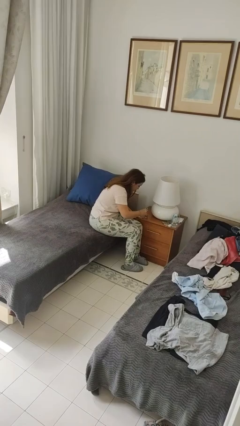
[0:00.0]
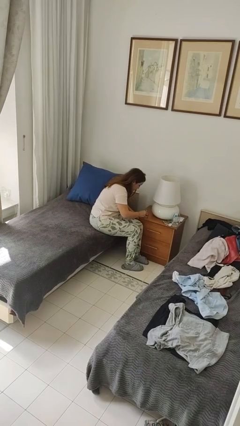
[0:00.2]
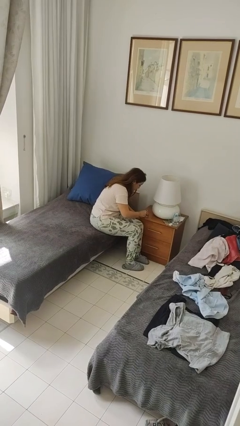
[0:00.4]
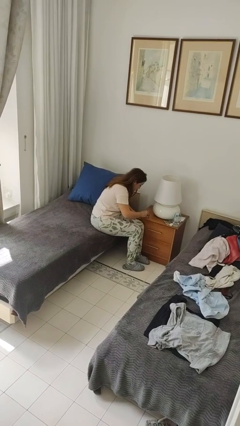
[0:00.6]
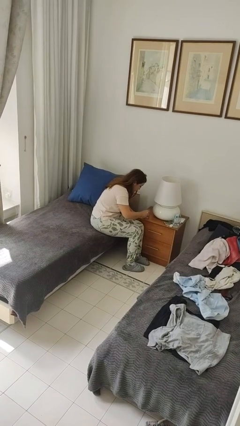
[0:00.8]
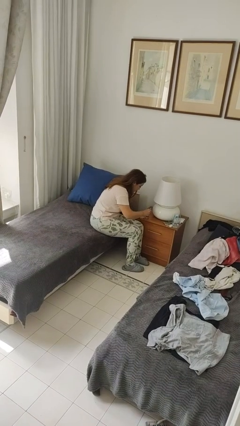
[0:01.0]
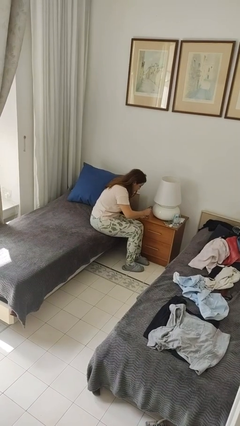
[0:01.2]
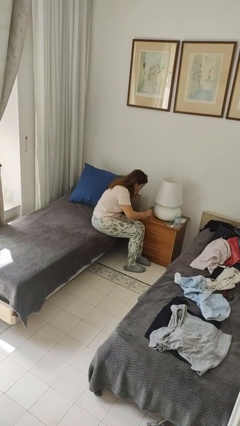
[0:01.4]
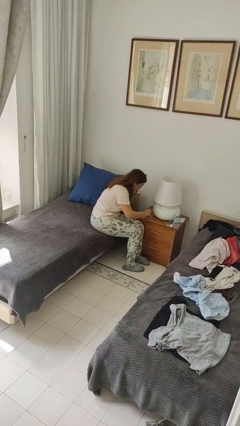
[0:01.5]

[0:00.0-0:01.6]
person paints fingernails

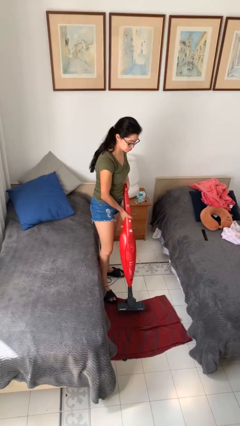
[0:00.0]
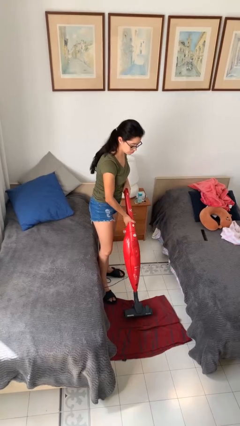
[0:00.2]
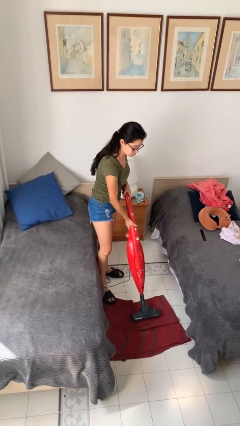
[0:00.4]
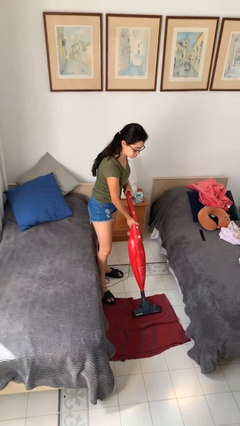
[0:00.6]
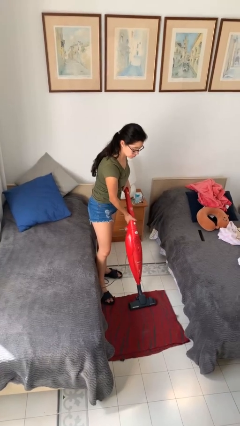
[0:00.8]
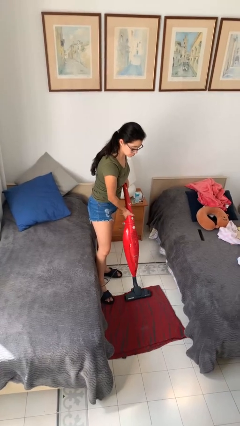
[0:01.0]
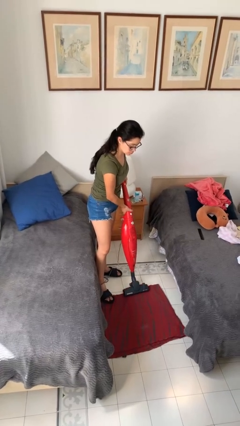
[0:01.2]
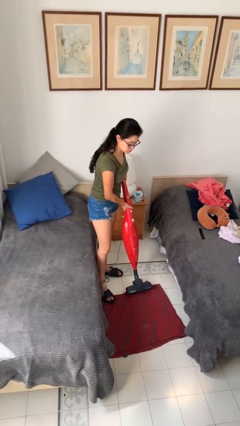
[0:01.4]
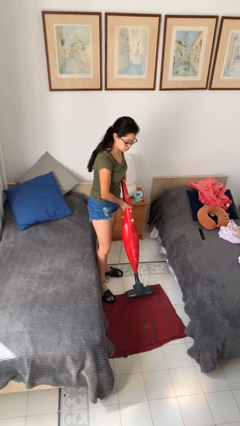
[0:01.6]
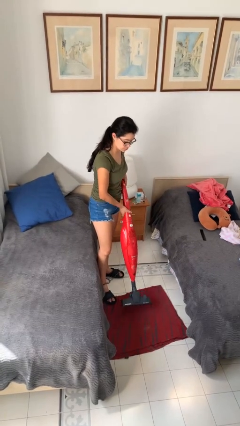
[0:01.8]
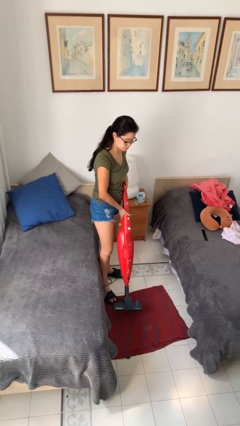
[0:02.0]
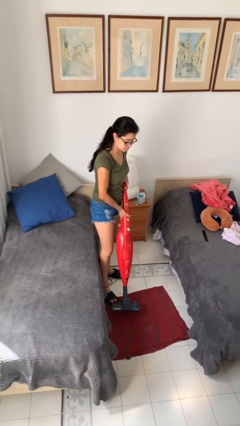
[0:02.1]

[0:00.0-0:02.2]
person vacuums carpet

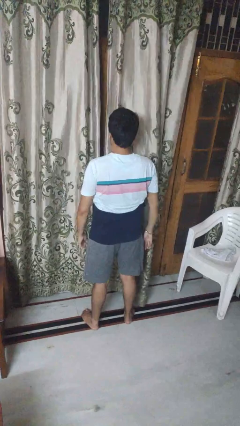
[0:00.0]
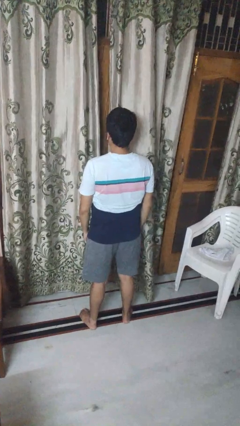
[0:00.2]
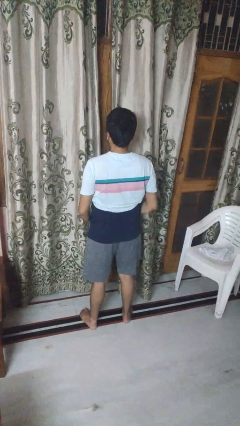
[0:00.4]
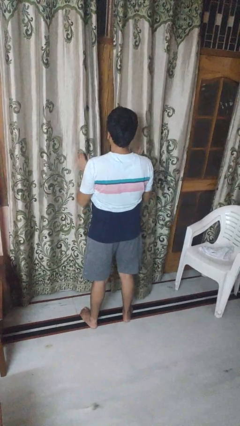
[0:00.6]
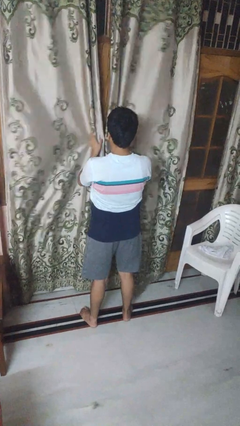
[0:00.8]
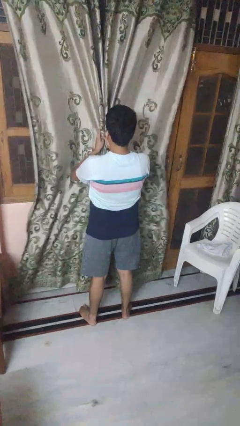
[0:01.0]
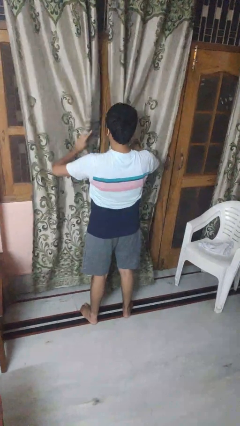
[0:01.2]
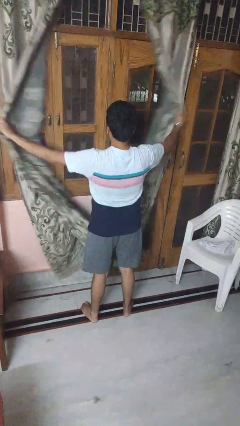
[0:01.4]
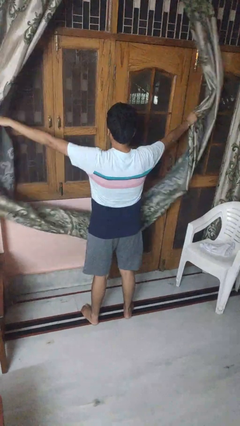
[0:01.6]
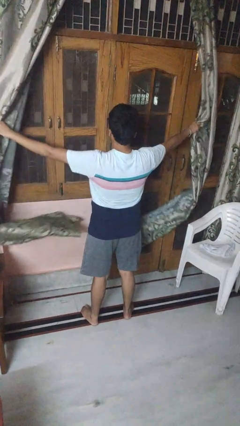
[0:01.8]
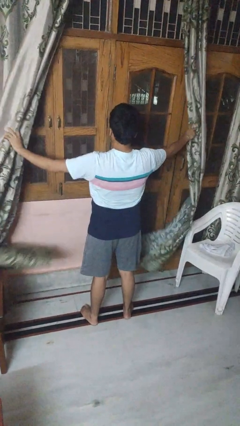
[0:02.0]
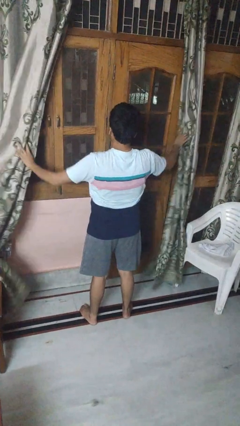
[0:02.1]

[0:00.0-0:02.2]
person opens curtains

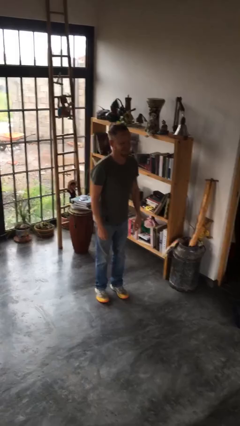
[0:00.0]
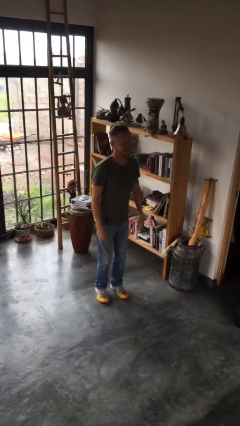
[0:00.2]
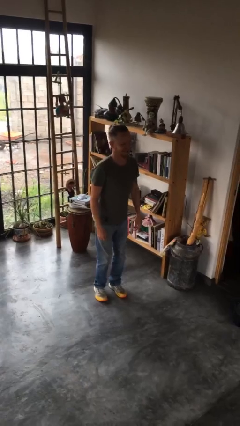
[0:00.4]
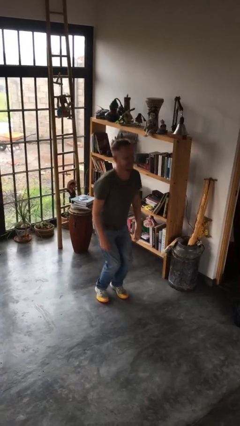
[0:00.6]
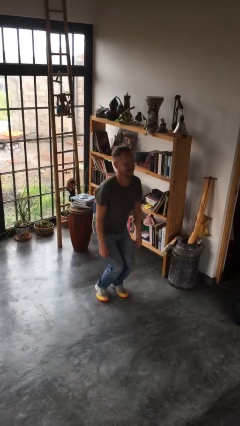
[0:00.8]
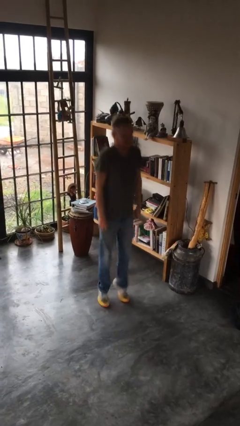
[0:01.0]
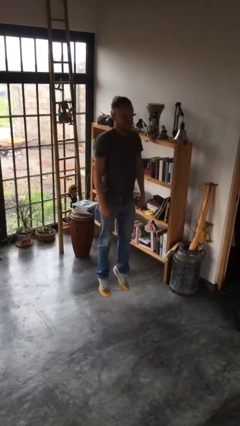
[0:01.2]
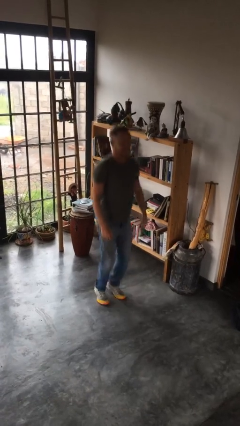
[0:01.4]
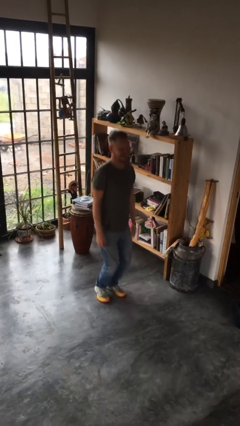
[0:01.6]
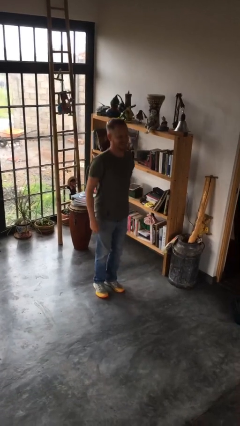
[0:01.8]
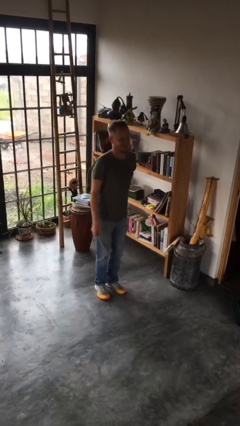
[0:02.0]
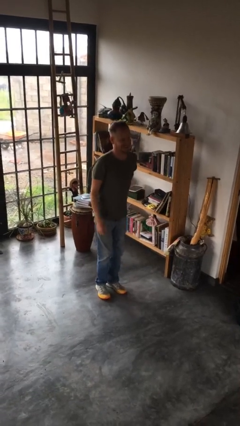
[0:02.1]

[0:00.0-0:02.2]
person jumps

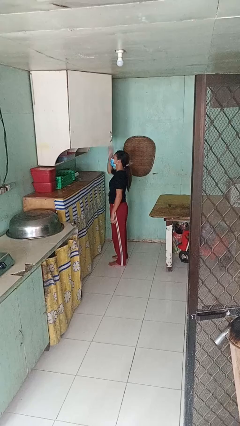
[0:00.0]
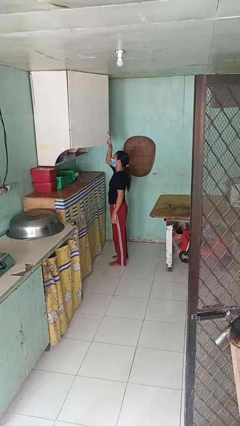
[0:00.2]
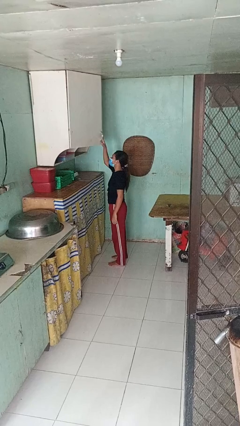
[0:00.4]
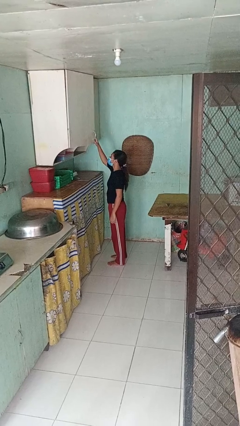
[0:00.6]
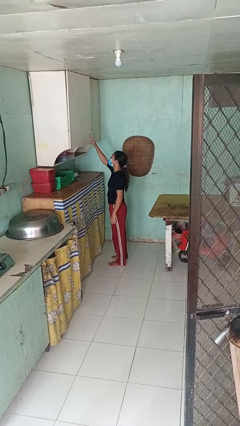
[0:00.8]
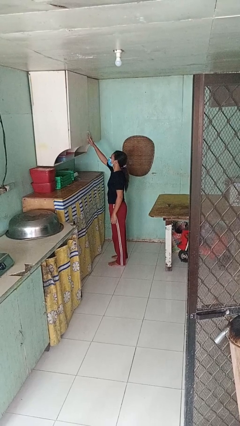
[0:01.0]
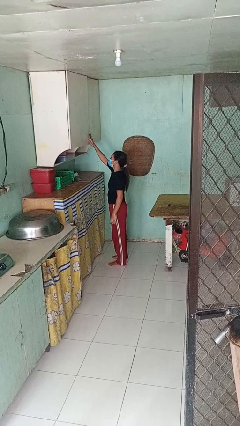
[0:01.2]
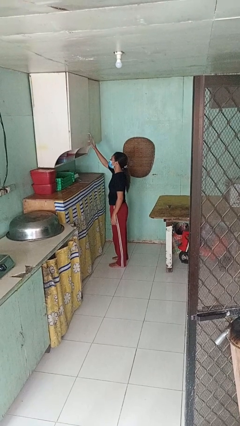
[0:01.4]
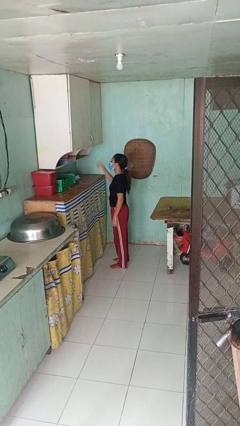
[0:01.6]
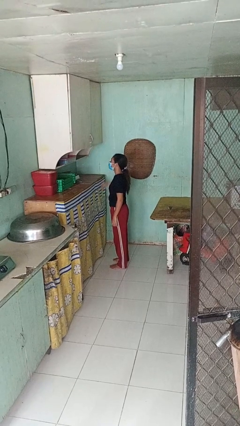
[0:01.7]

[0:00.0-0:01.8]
person closes cabinet

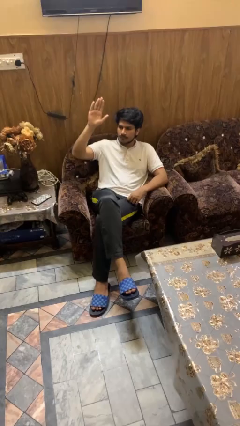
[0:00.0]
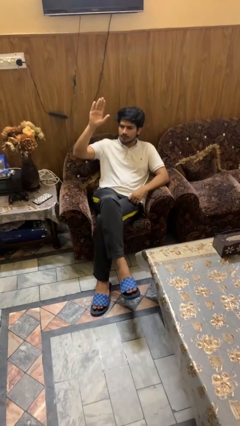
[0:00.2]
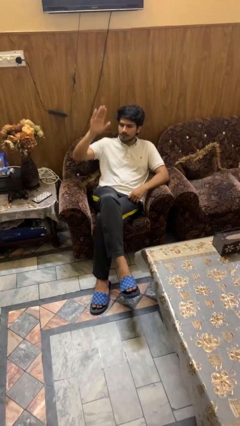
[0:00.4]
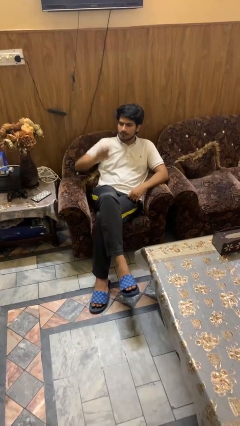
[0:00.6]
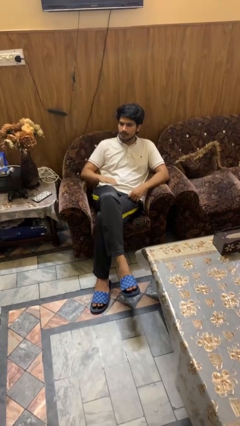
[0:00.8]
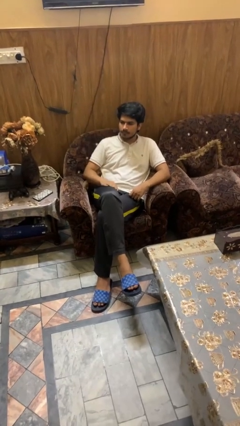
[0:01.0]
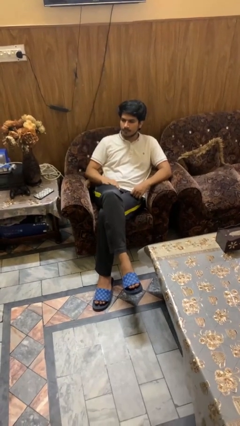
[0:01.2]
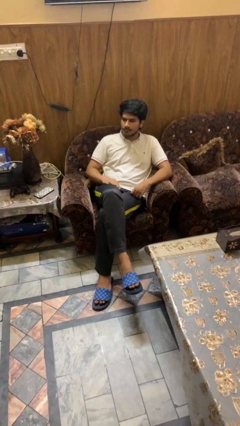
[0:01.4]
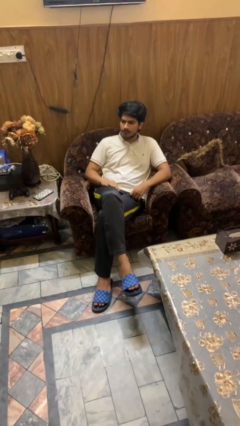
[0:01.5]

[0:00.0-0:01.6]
person gestures lower hand

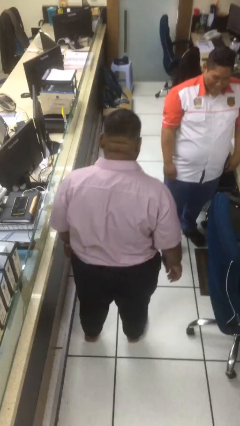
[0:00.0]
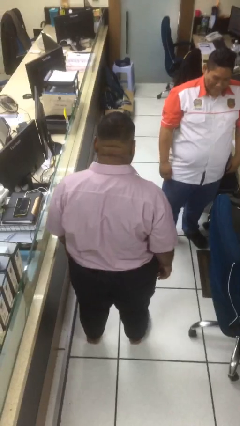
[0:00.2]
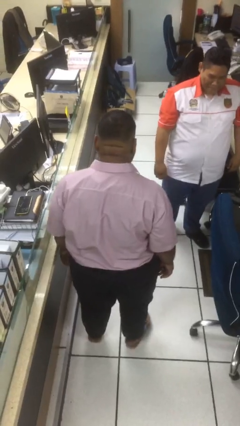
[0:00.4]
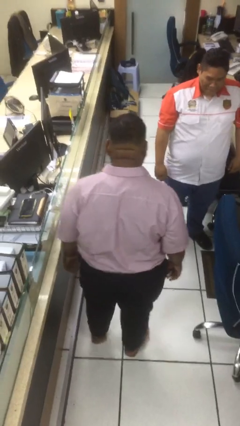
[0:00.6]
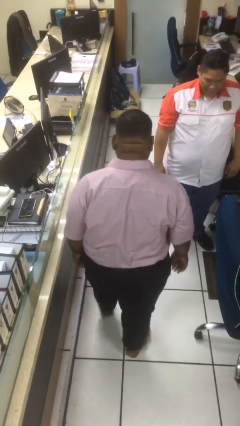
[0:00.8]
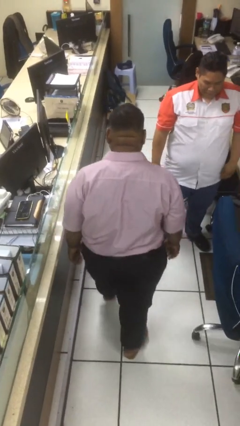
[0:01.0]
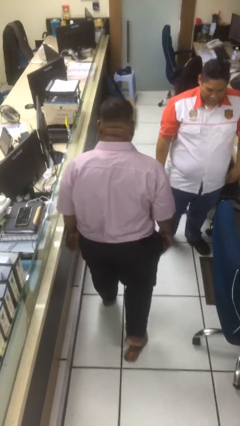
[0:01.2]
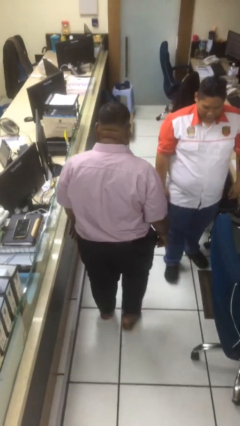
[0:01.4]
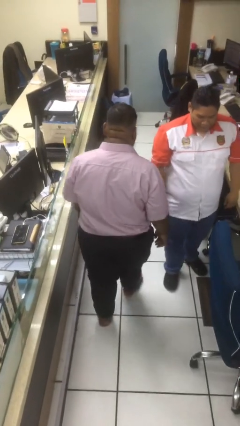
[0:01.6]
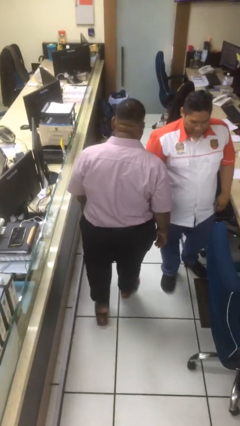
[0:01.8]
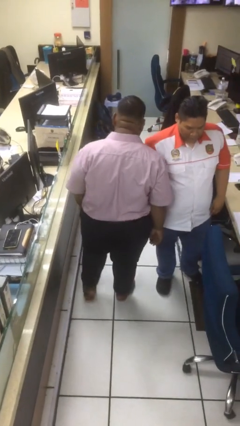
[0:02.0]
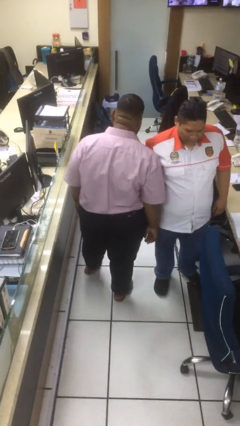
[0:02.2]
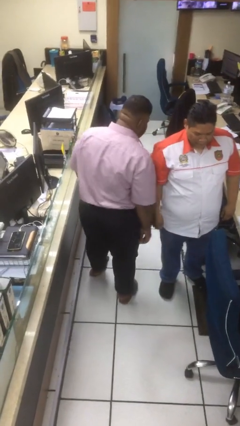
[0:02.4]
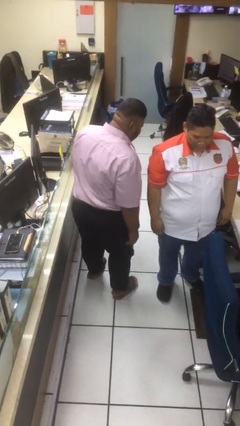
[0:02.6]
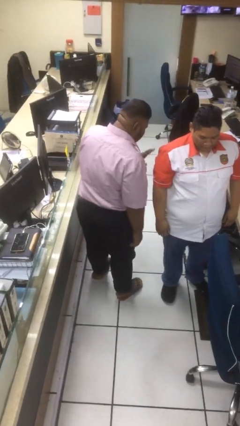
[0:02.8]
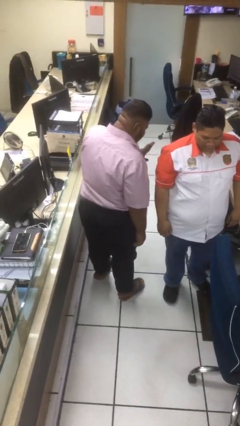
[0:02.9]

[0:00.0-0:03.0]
person bumps into person

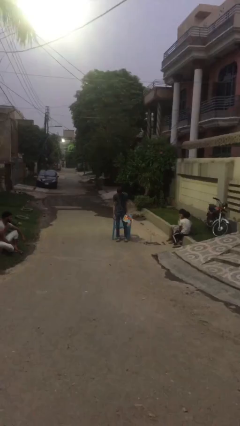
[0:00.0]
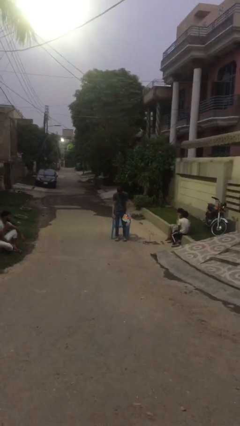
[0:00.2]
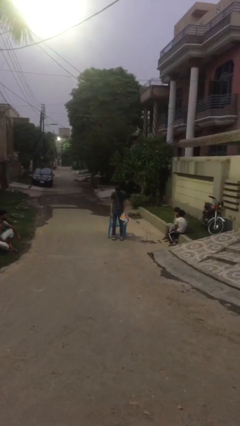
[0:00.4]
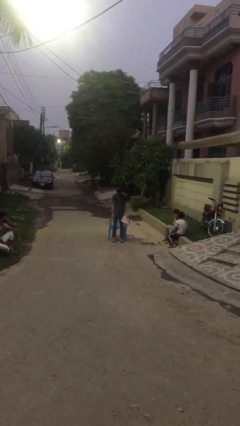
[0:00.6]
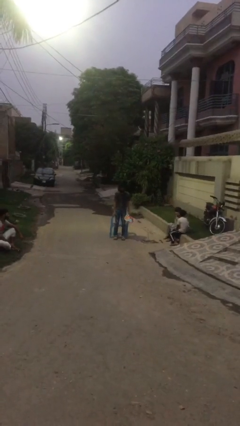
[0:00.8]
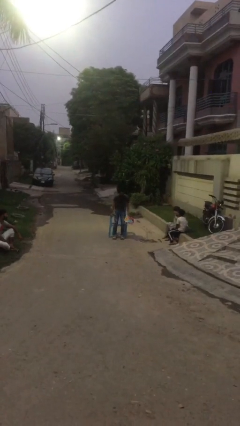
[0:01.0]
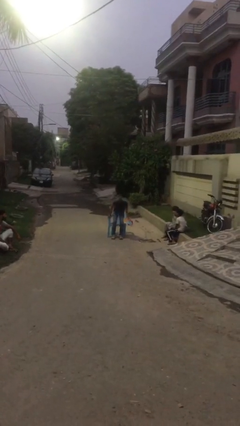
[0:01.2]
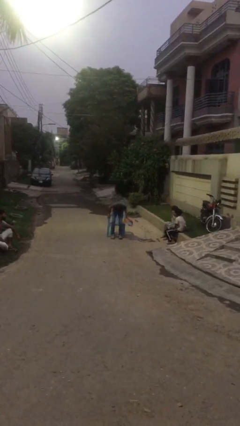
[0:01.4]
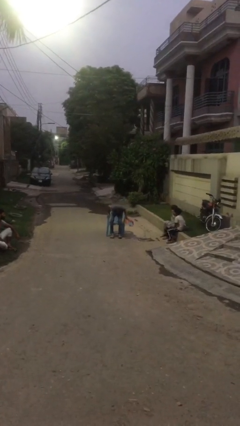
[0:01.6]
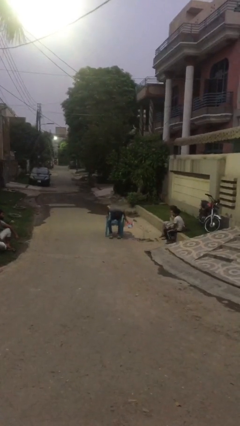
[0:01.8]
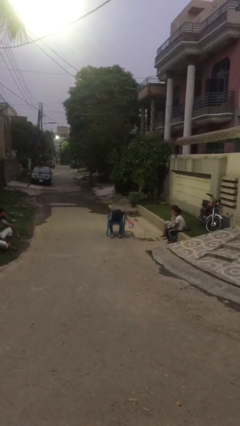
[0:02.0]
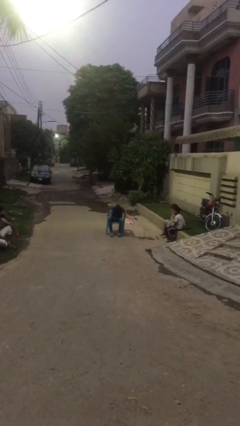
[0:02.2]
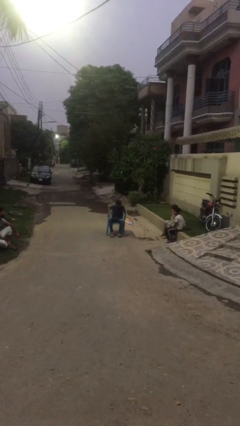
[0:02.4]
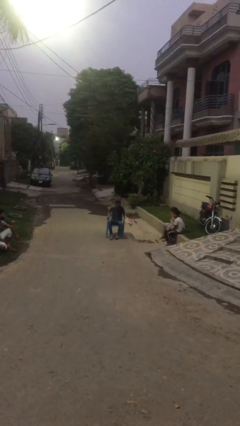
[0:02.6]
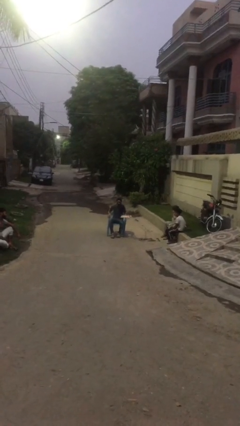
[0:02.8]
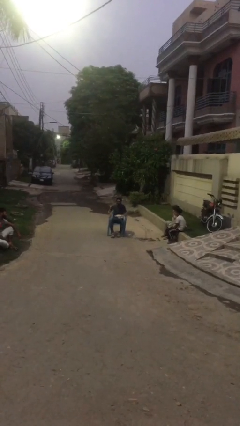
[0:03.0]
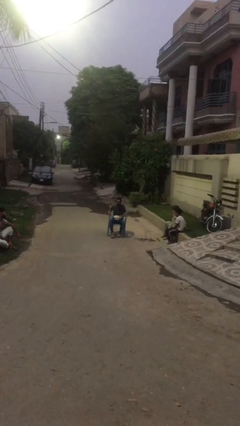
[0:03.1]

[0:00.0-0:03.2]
person sits down
